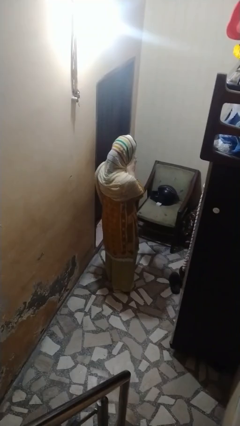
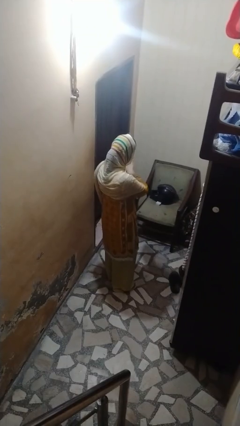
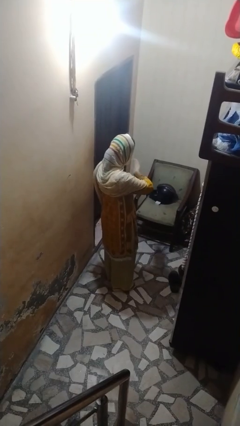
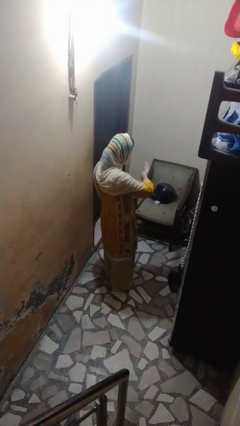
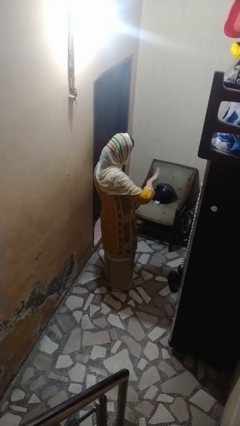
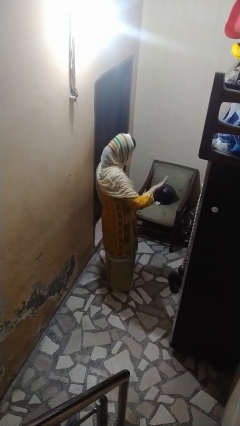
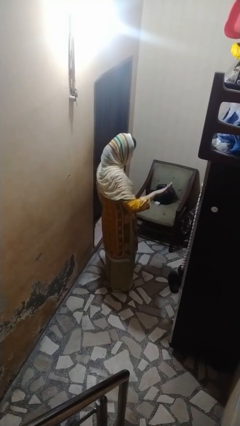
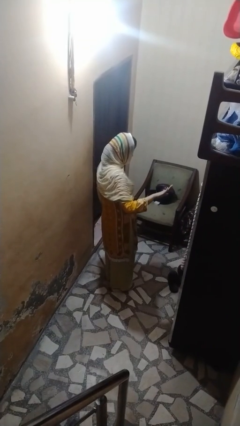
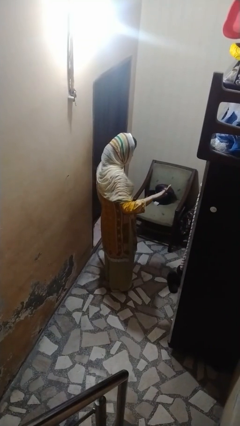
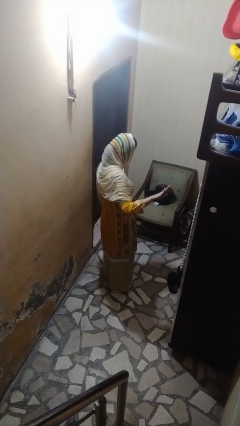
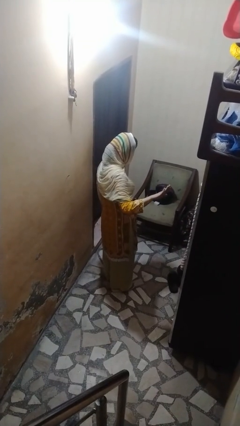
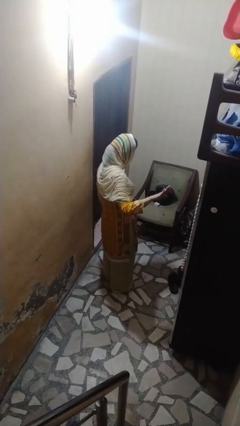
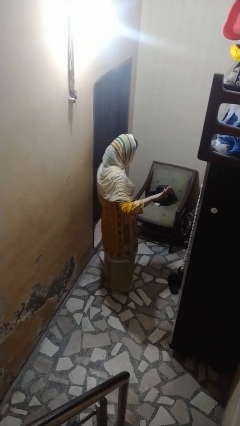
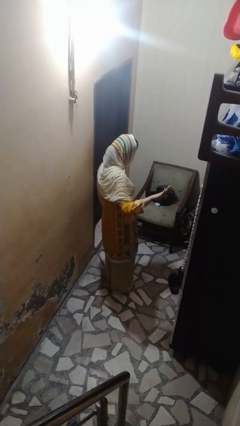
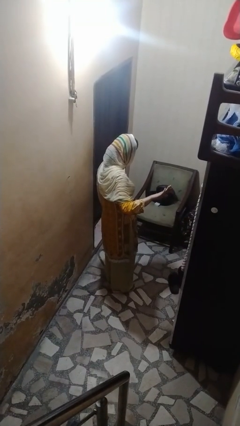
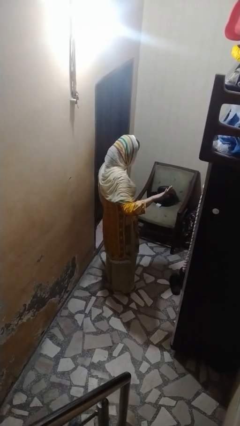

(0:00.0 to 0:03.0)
person gestures swipe right

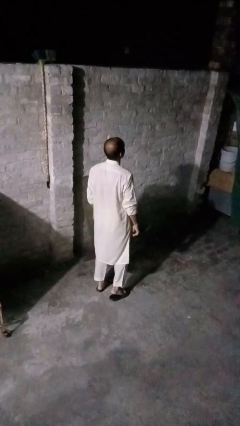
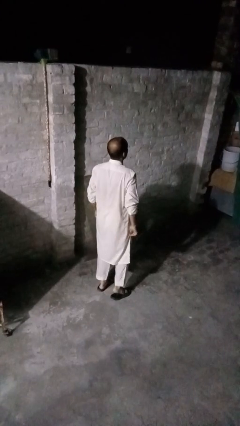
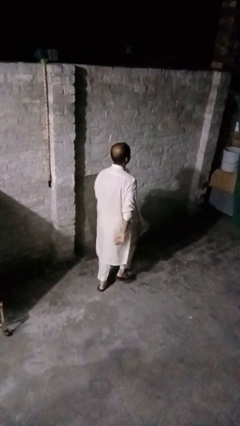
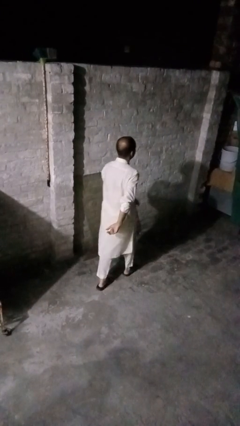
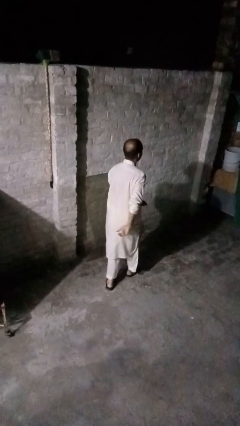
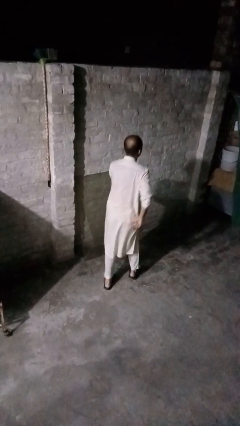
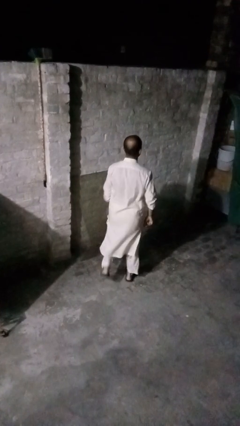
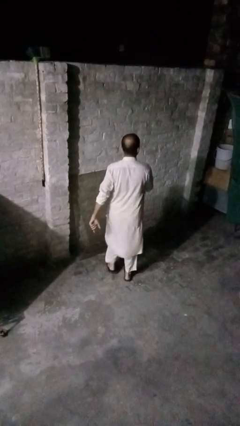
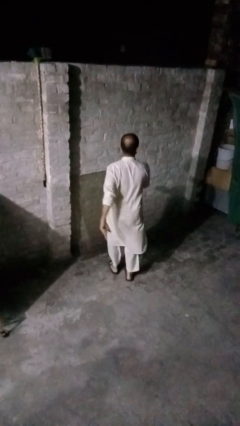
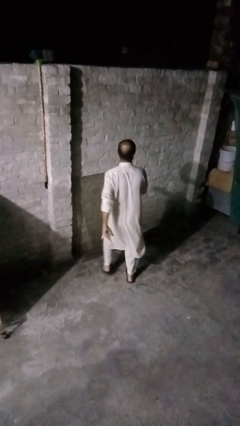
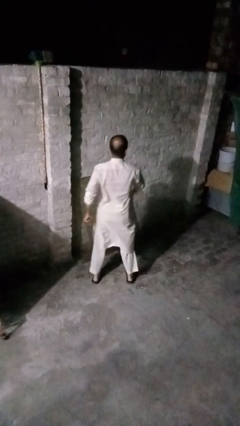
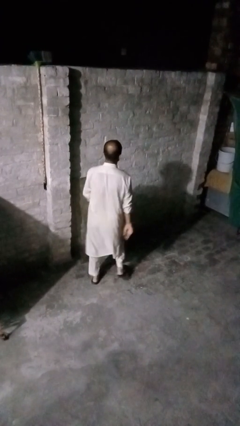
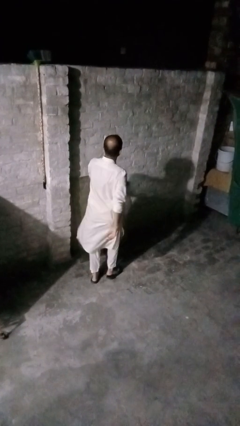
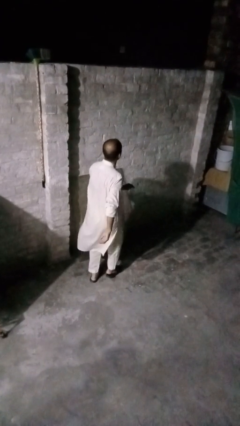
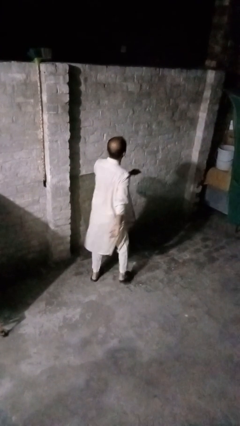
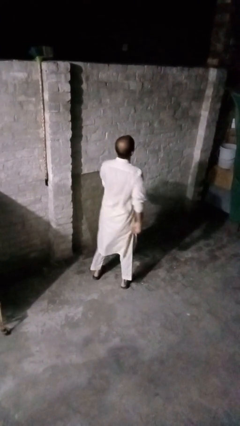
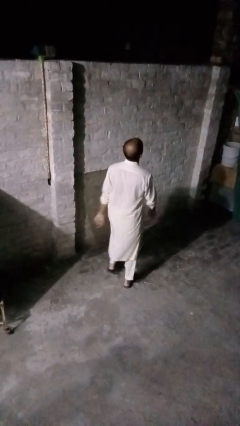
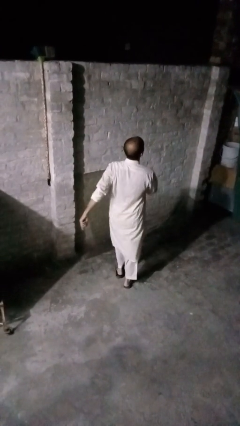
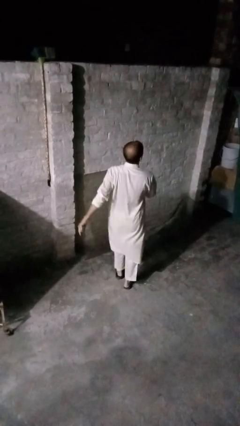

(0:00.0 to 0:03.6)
person dances in place

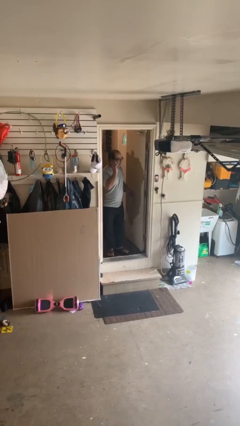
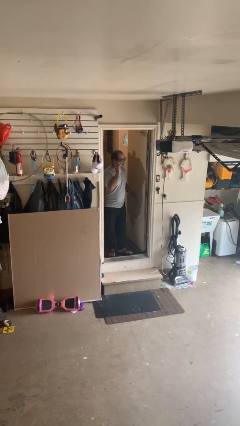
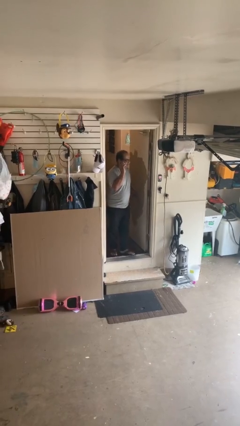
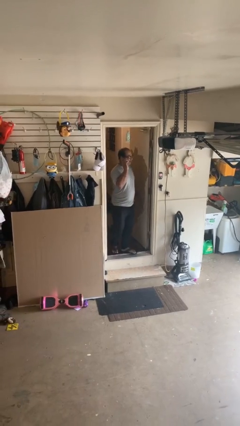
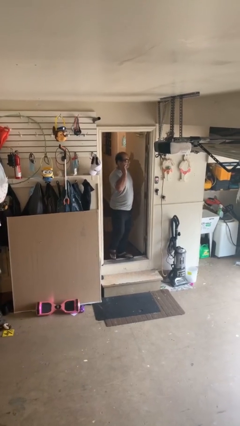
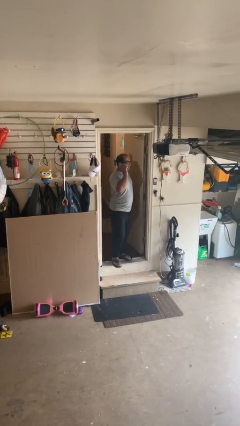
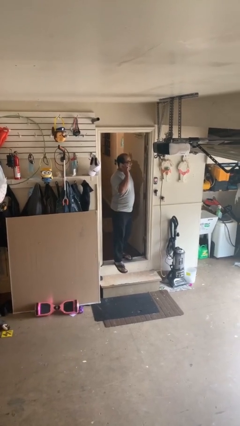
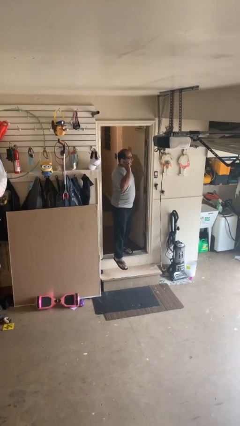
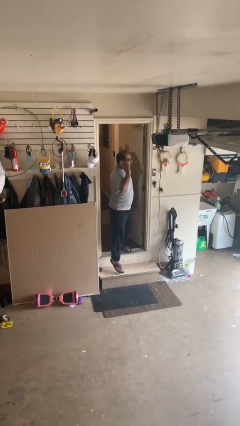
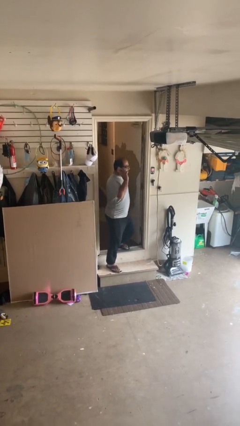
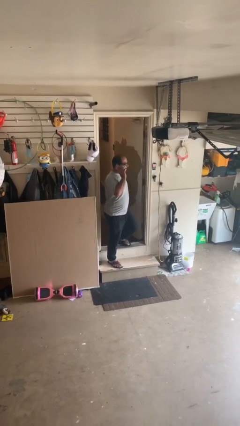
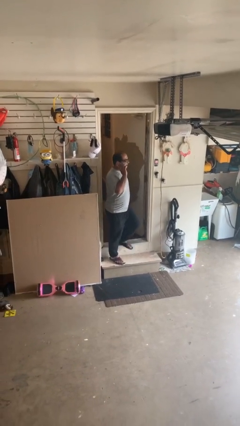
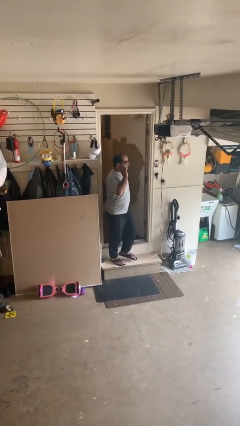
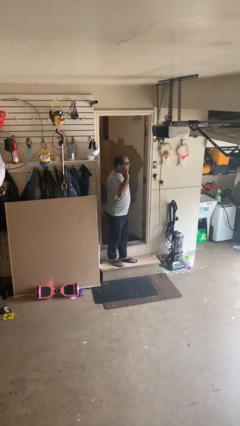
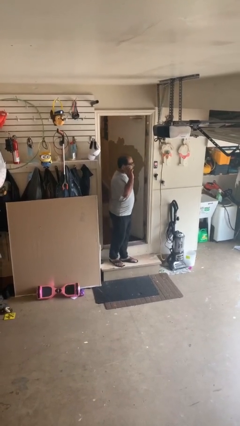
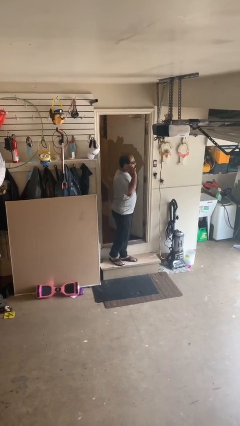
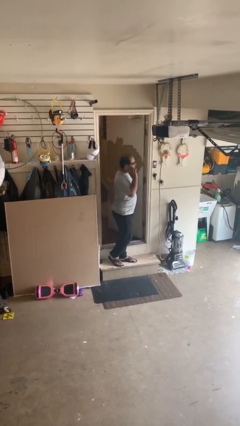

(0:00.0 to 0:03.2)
person enters scene through structure

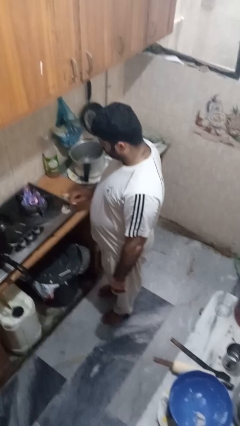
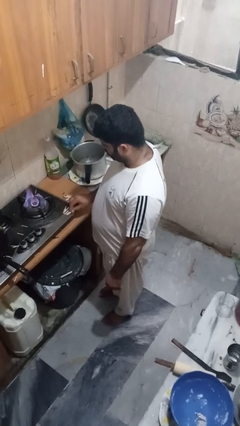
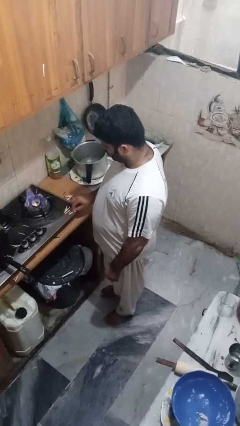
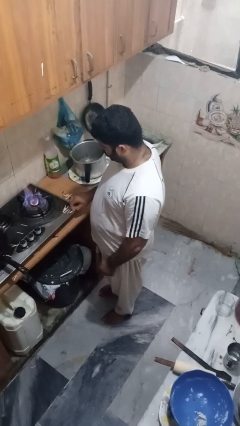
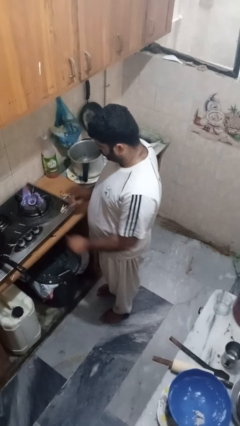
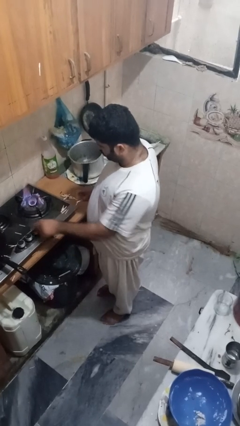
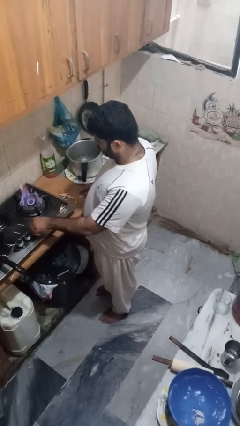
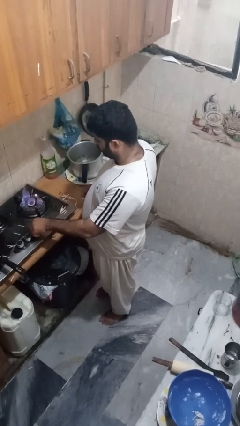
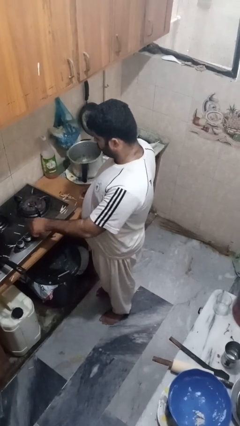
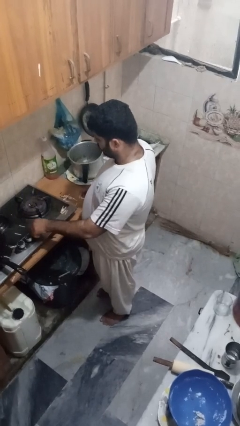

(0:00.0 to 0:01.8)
person turns off stovetop

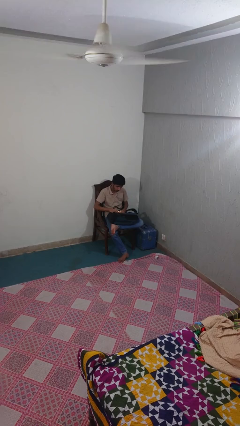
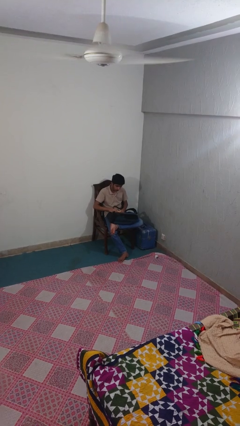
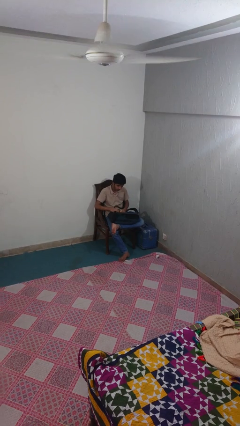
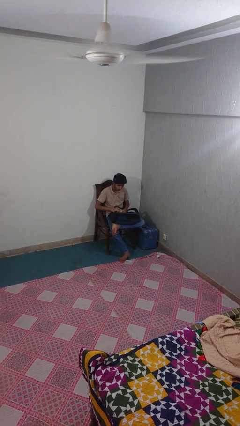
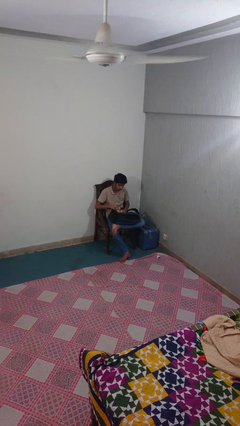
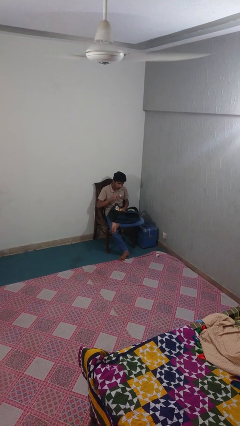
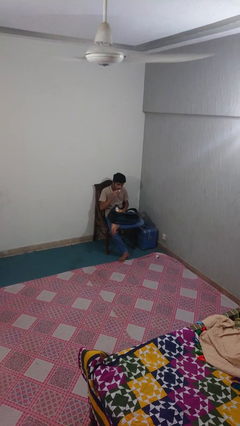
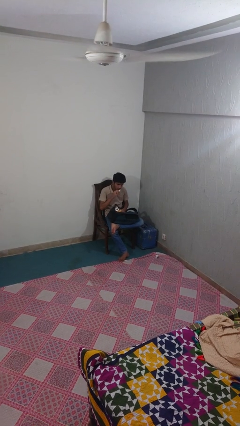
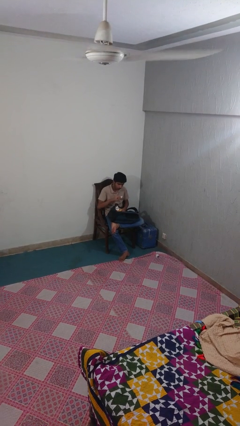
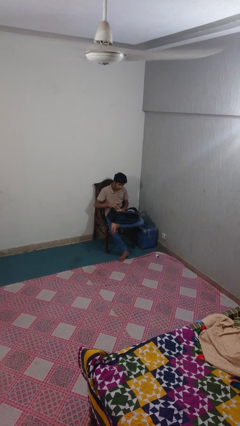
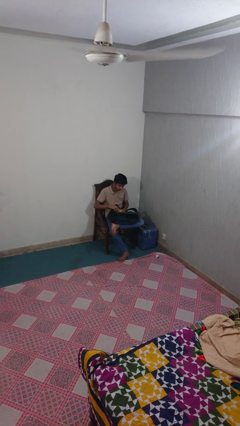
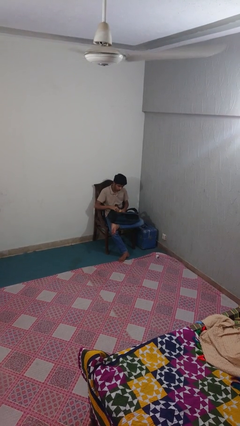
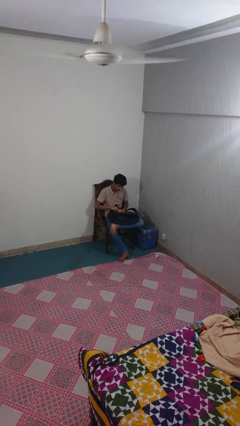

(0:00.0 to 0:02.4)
person eats snack from bag

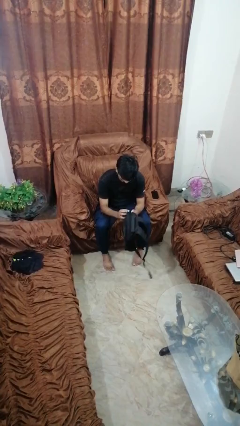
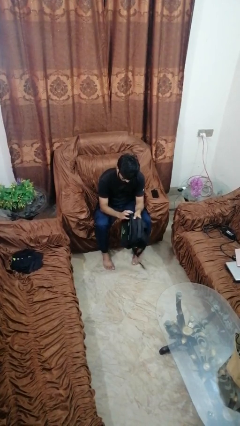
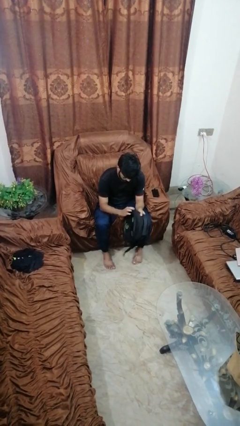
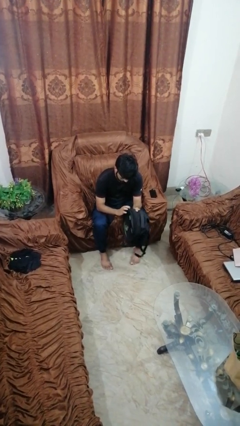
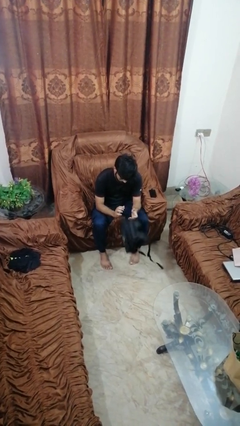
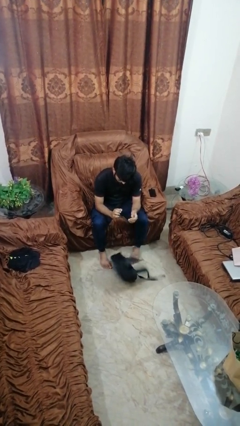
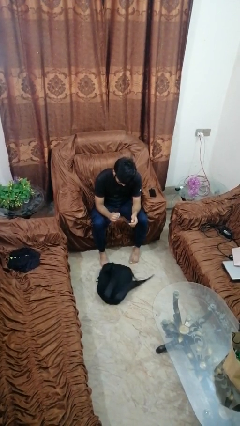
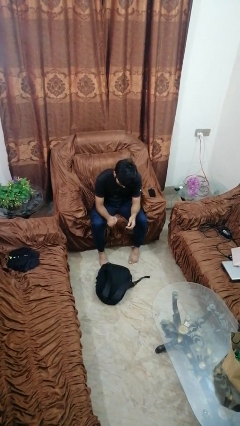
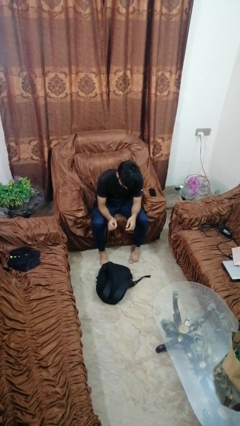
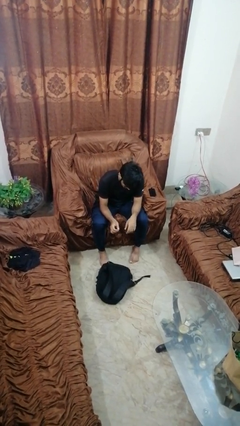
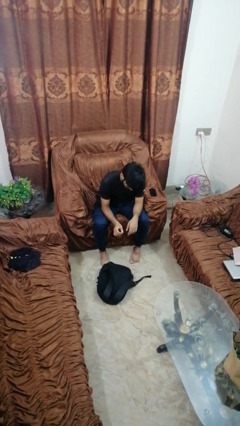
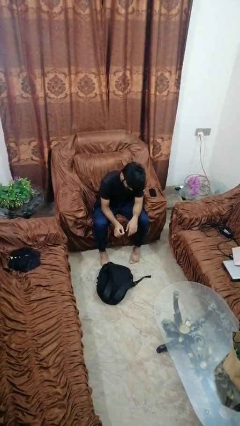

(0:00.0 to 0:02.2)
person drops object

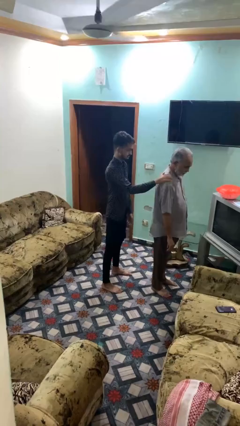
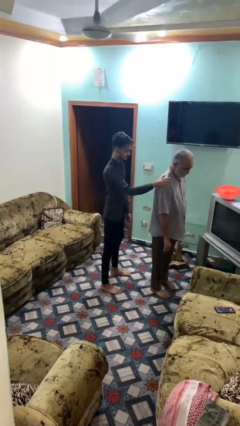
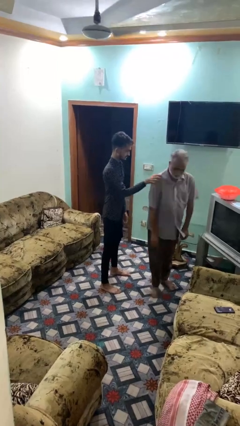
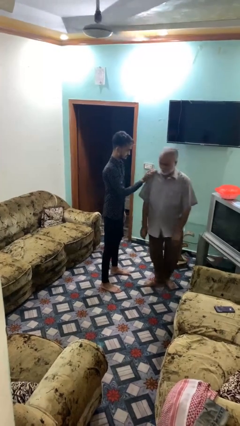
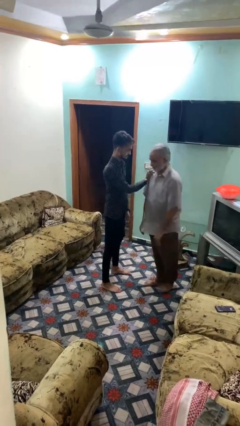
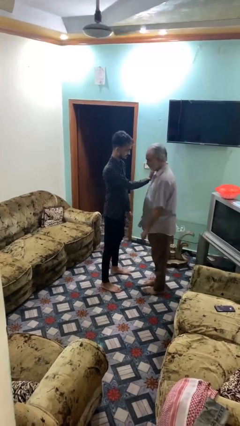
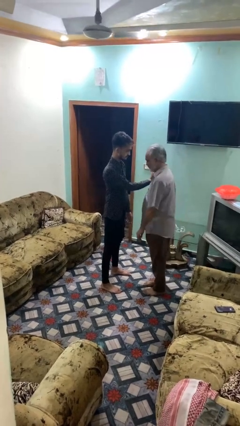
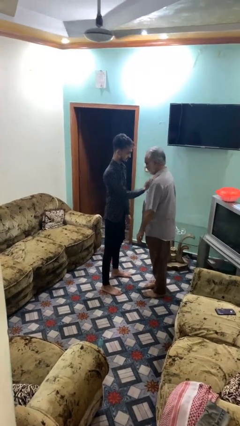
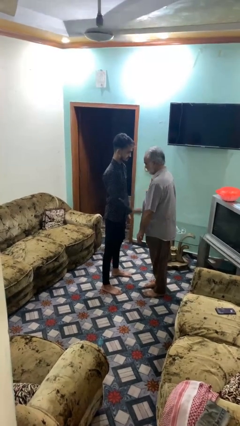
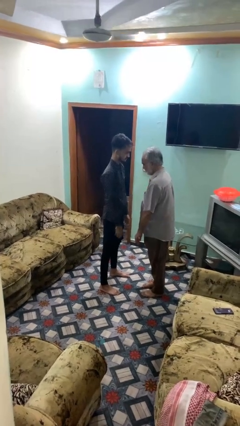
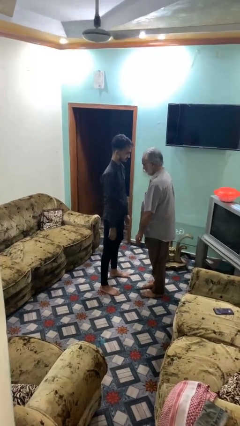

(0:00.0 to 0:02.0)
person spins person around
